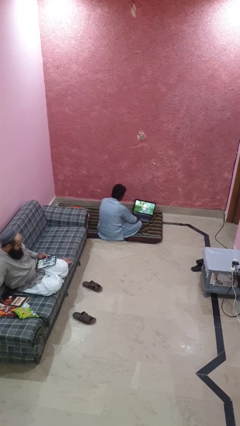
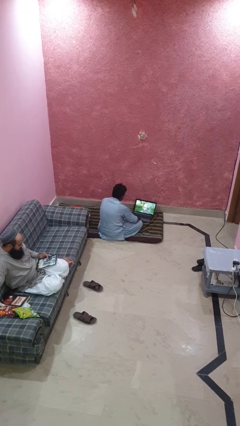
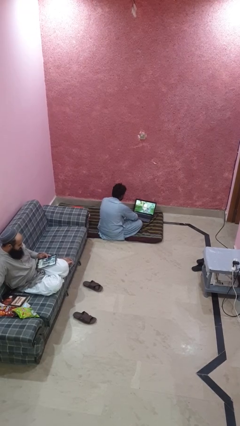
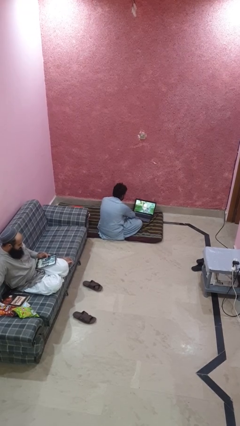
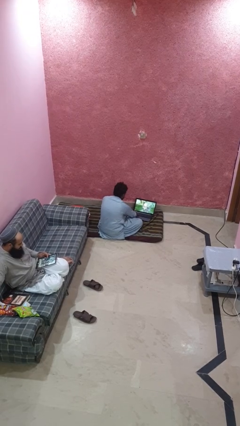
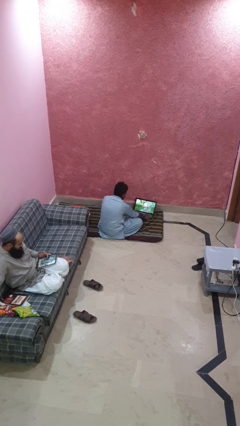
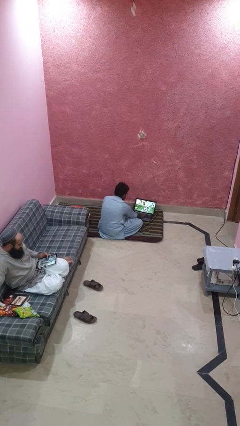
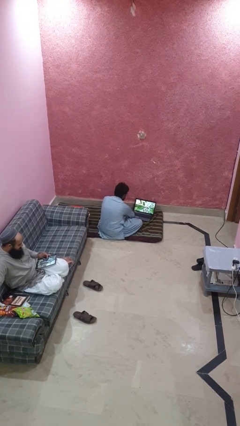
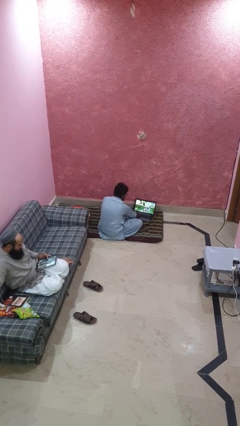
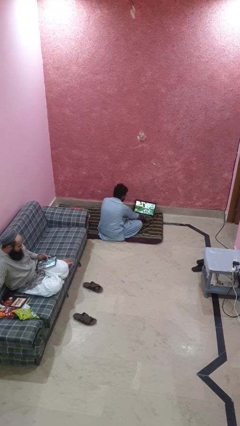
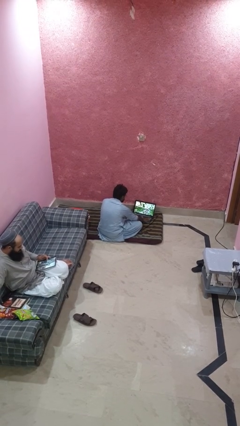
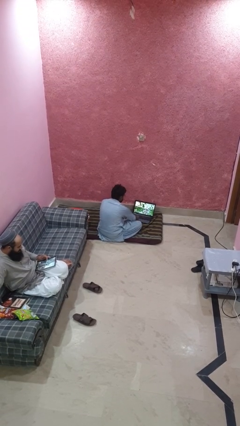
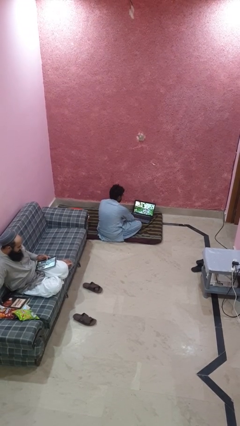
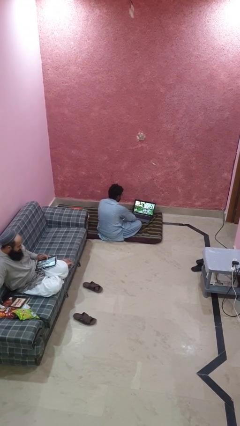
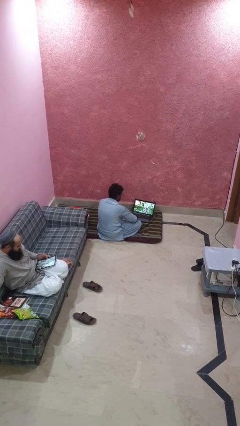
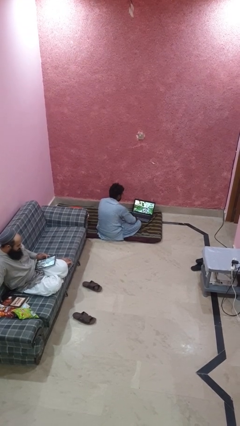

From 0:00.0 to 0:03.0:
person waves hand over object

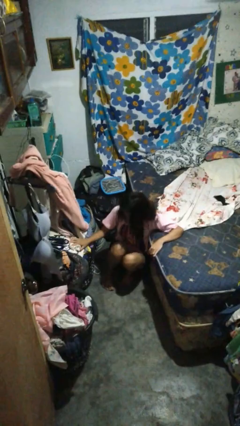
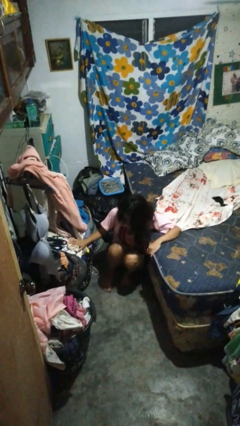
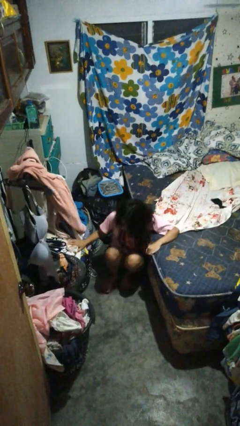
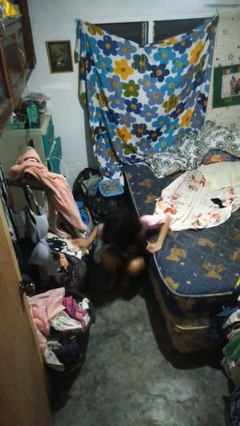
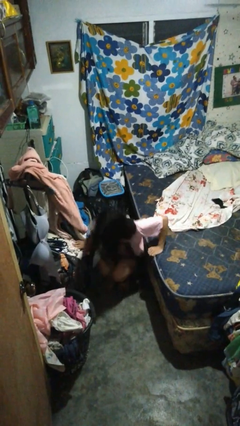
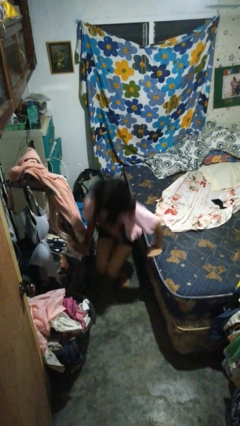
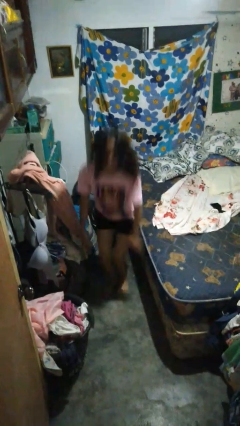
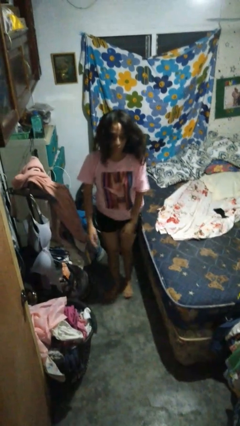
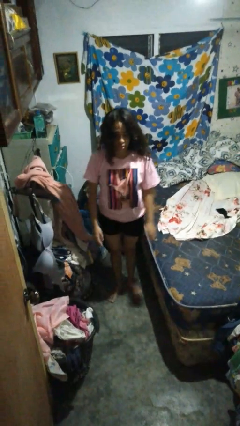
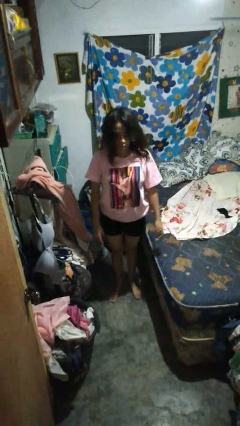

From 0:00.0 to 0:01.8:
person stands up from floor

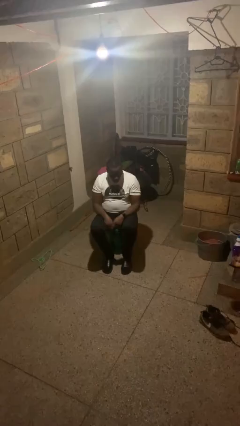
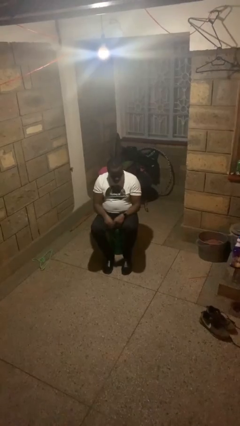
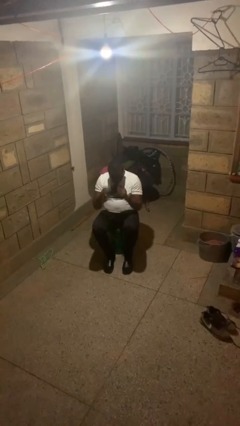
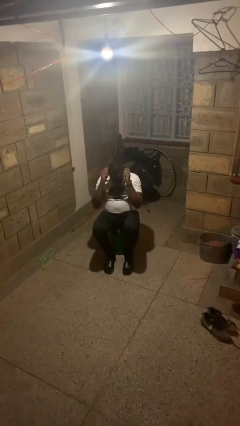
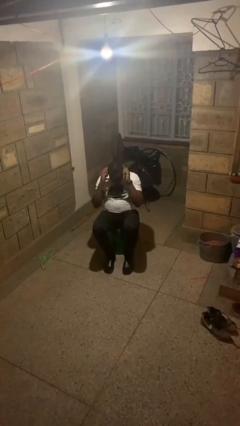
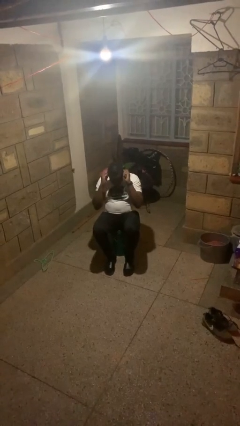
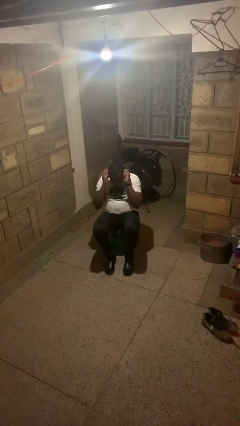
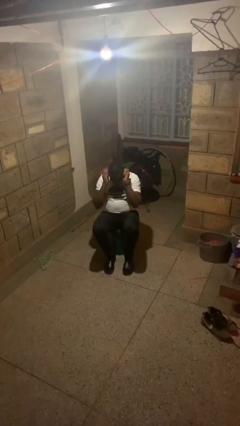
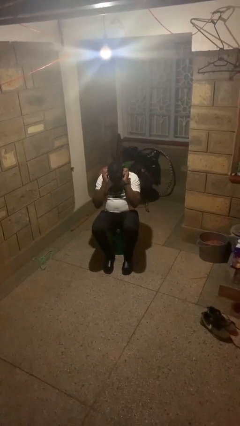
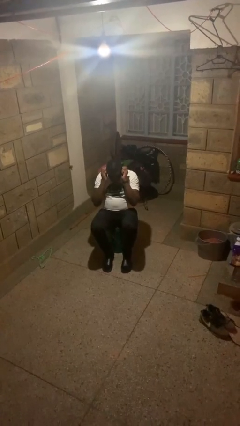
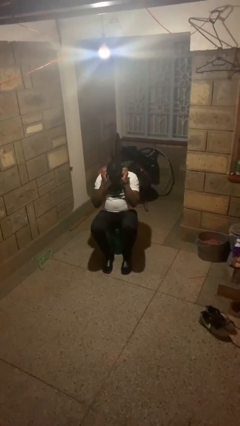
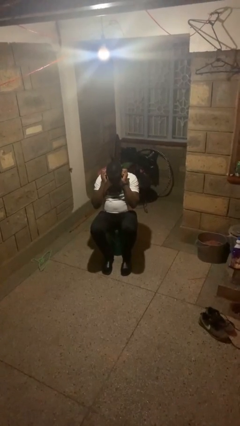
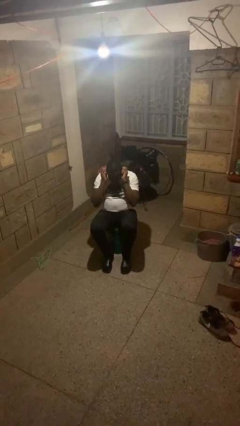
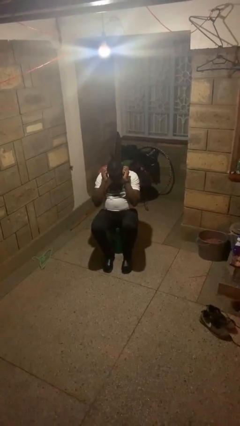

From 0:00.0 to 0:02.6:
person touches earlobe

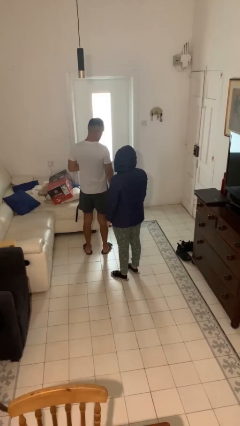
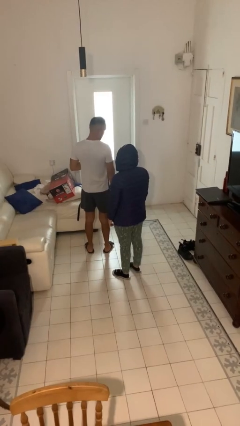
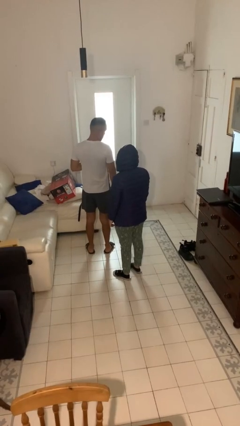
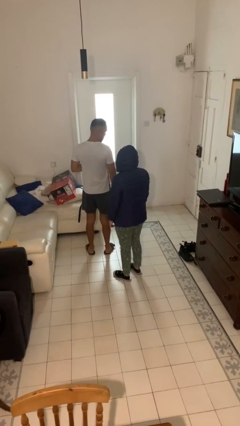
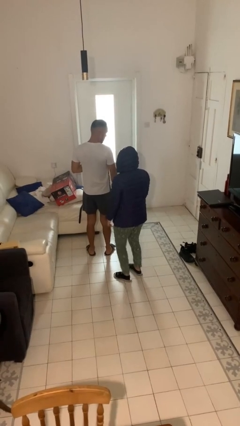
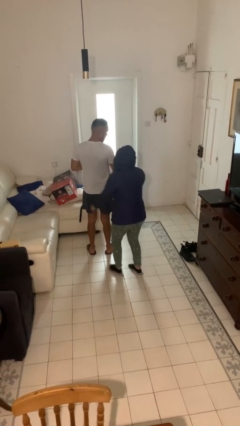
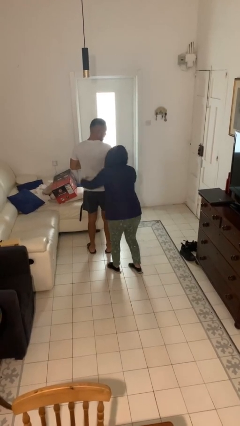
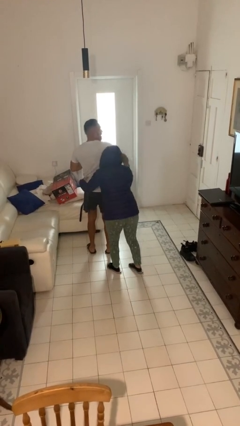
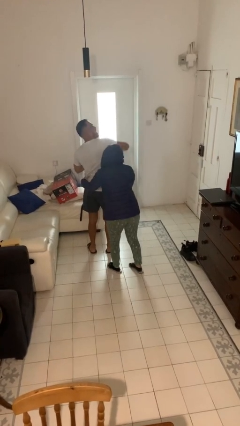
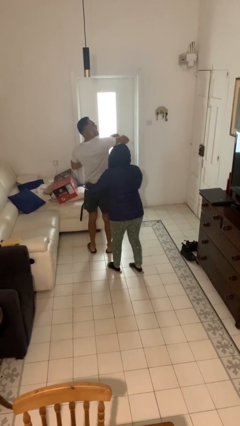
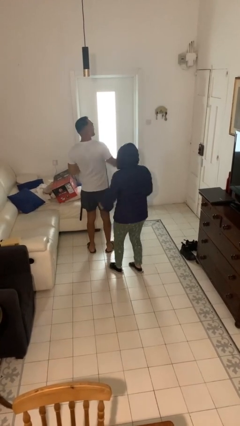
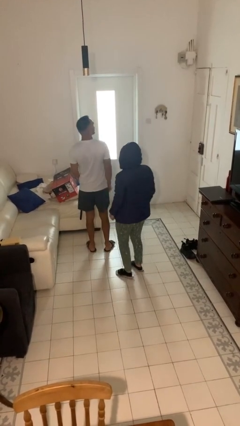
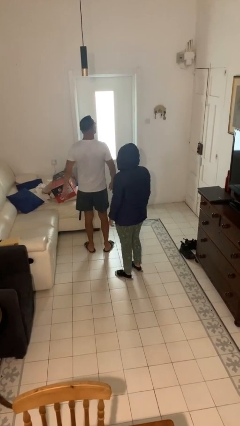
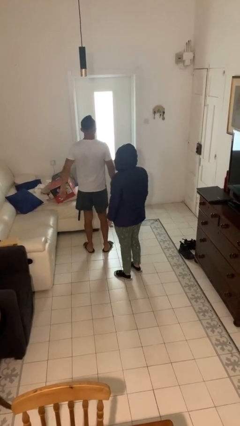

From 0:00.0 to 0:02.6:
person tickles person

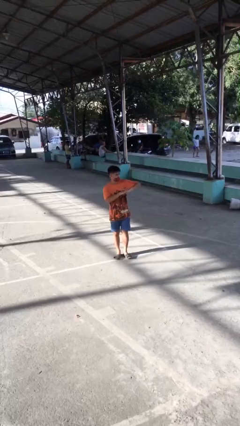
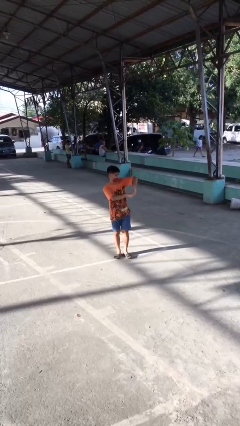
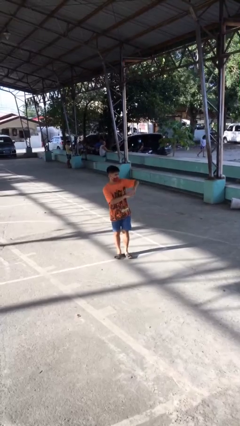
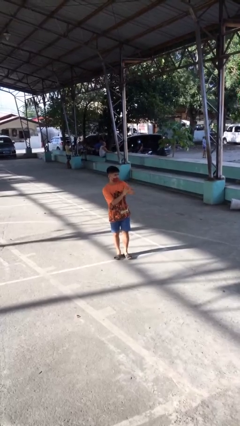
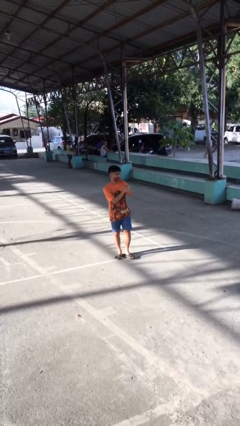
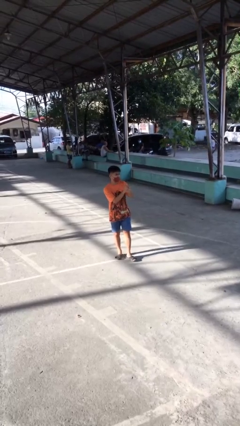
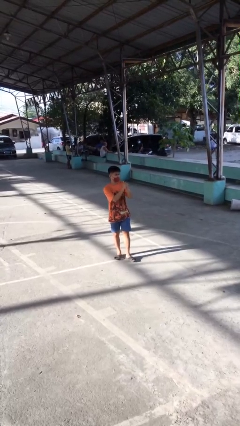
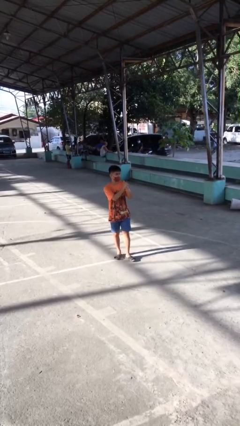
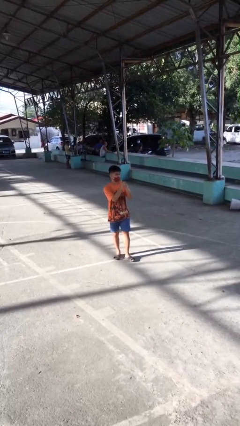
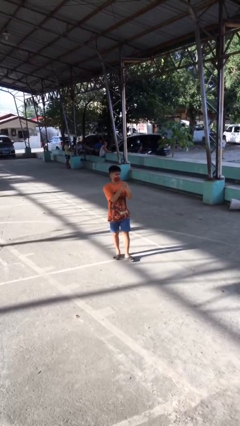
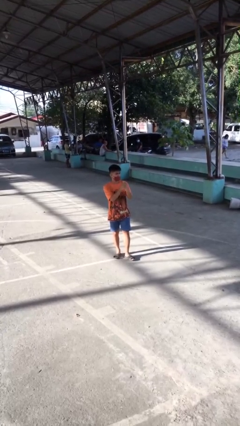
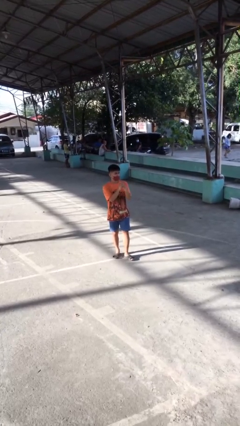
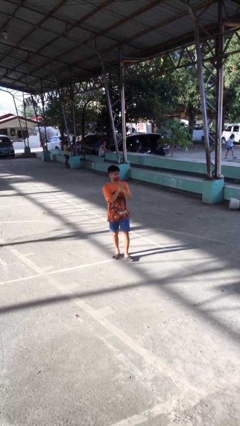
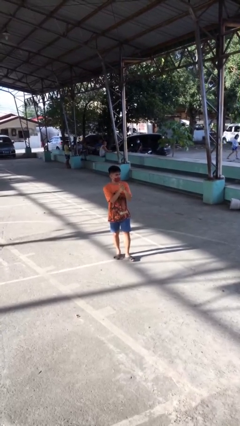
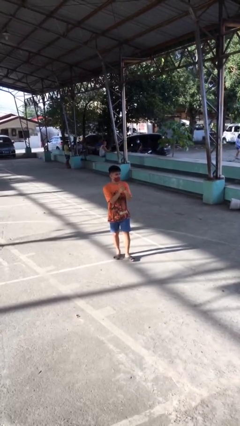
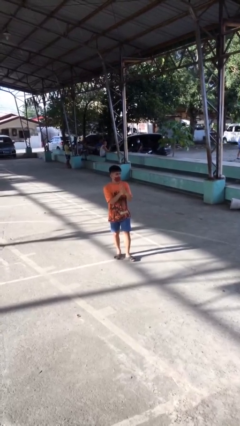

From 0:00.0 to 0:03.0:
person cracks knuckles

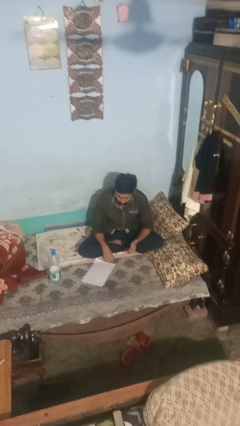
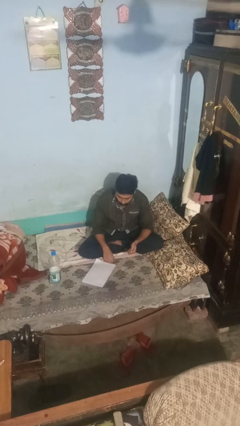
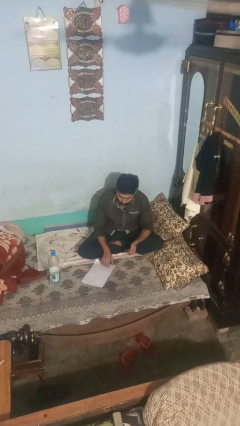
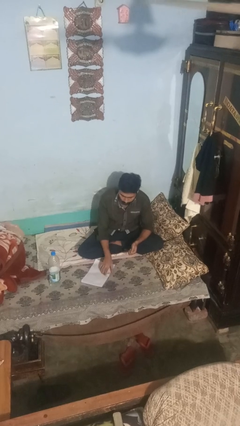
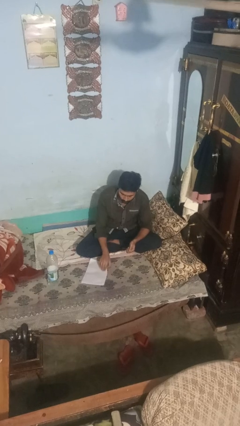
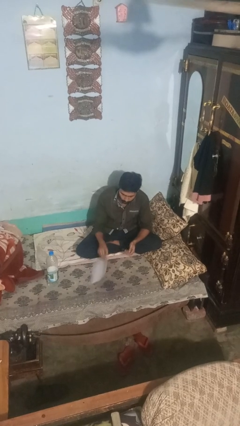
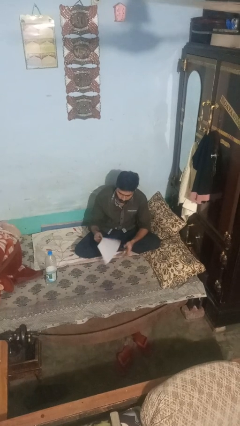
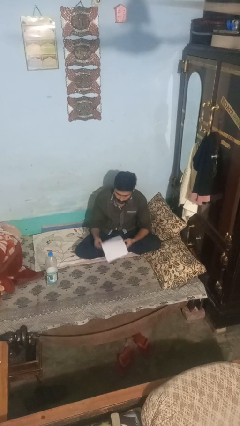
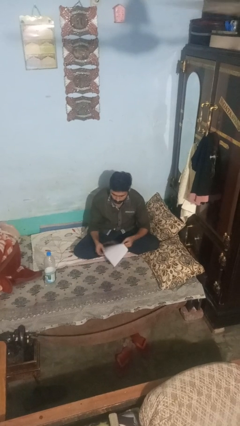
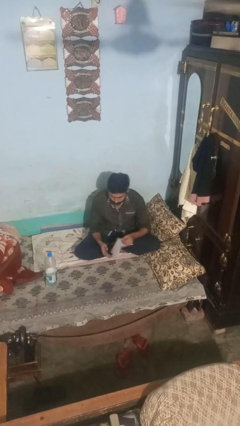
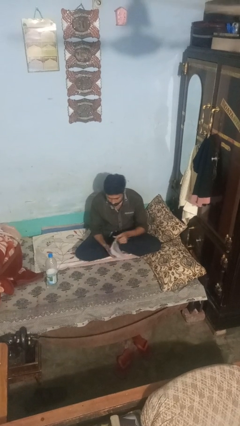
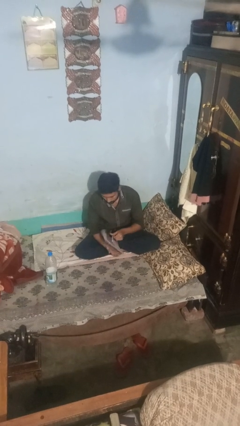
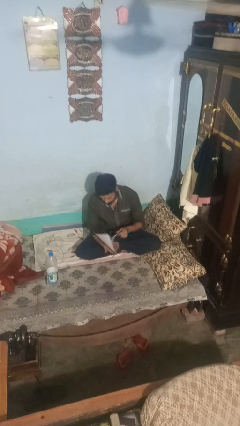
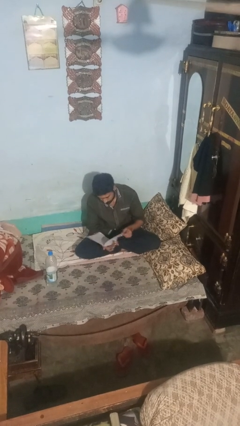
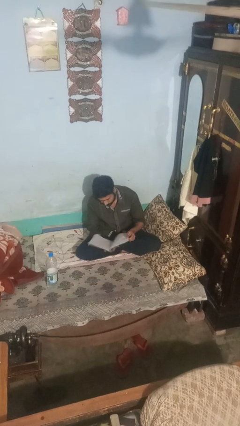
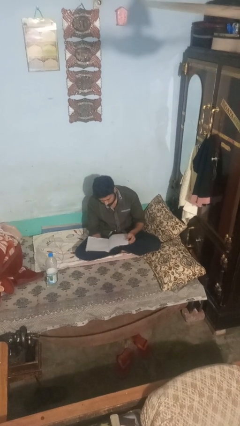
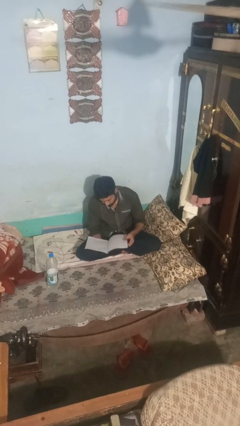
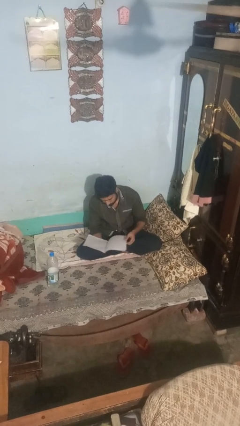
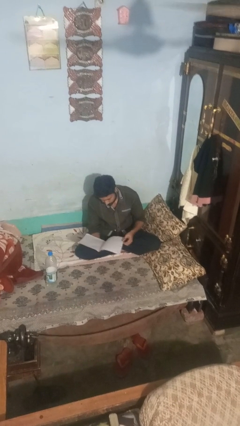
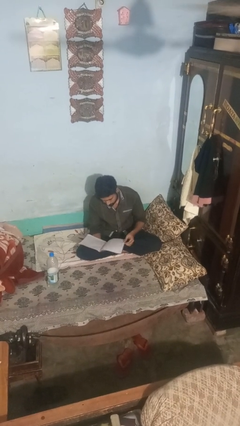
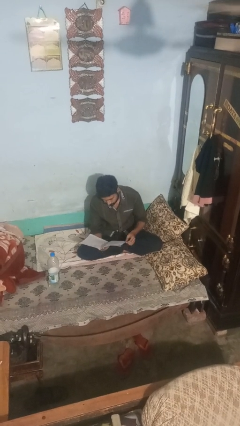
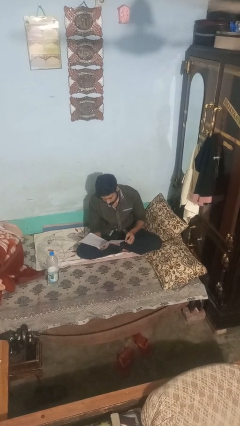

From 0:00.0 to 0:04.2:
person reads newspaper

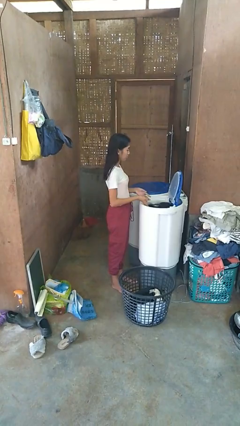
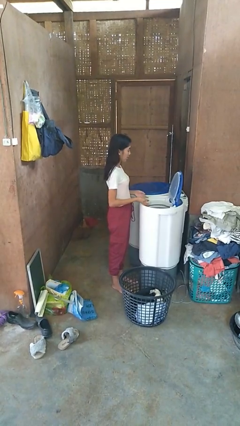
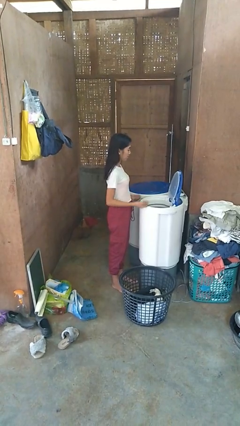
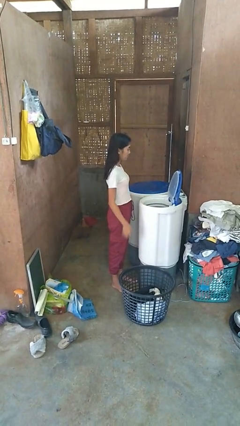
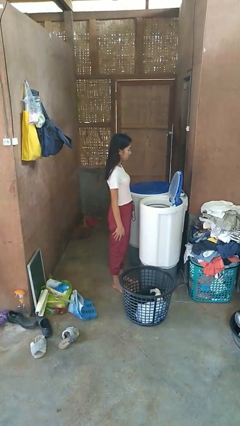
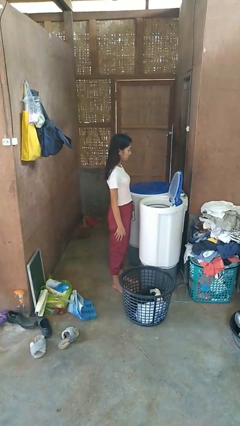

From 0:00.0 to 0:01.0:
person loads dryer
